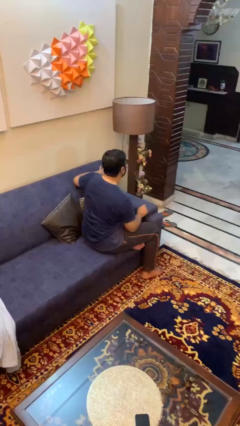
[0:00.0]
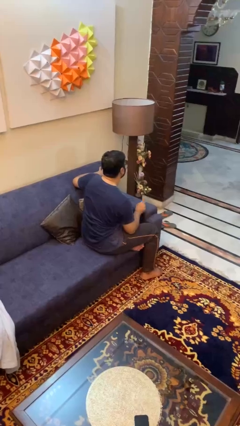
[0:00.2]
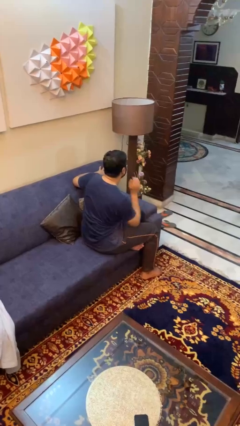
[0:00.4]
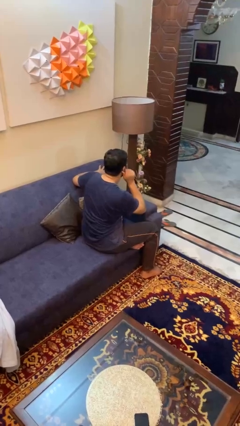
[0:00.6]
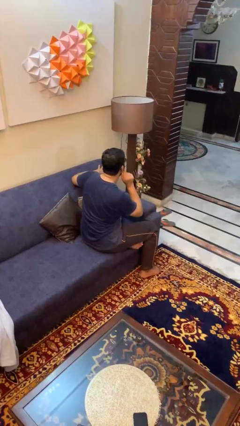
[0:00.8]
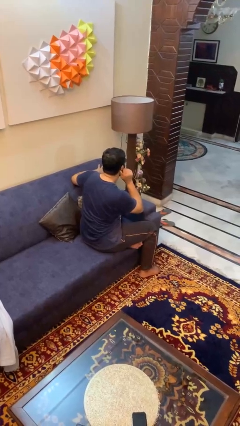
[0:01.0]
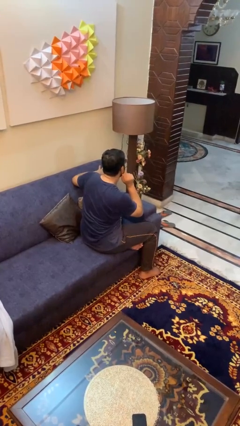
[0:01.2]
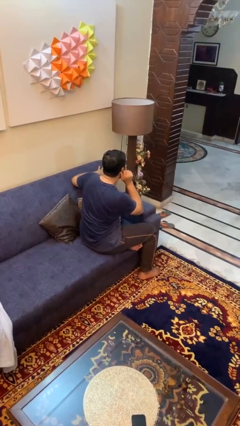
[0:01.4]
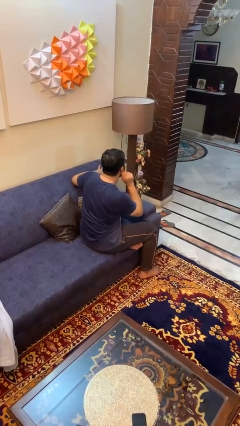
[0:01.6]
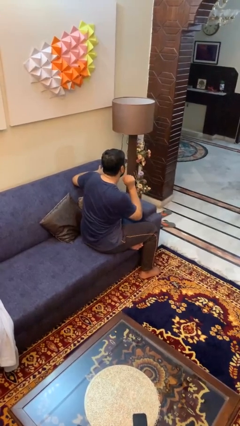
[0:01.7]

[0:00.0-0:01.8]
person touches earlobe

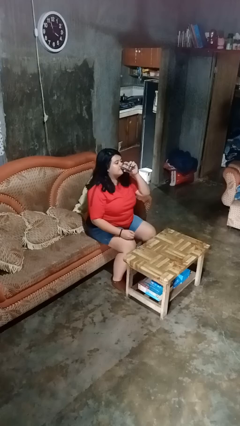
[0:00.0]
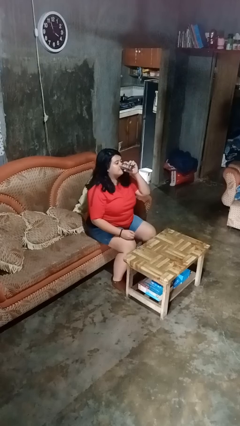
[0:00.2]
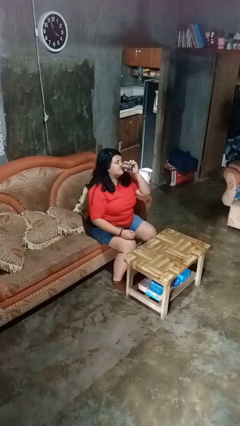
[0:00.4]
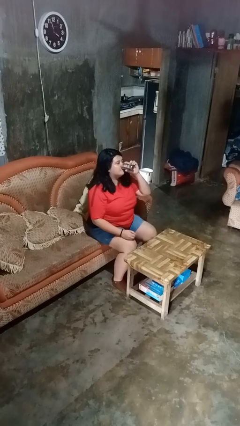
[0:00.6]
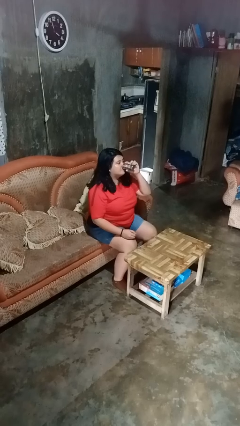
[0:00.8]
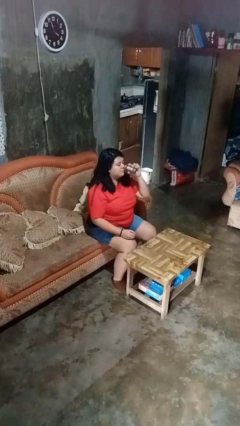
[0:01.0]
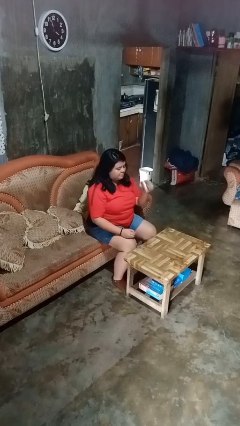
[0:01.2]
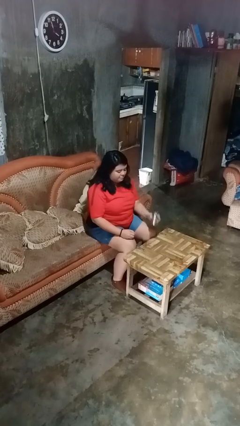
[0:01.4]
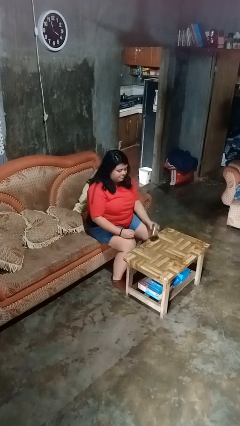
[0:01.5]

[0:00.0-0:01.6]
person drinks from beverage can

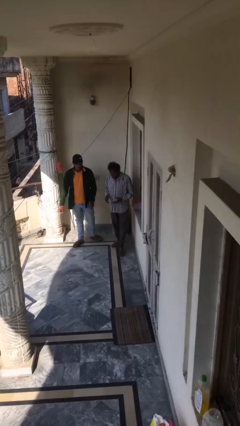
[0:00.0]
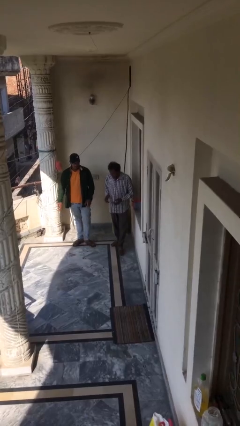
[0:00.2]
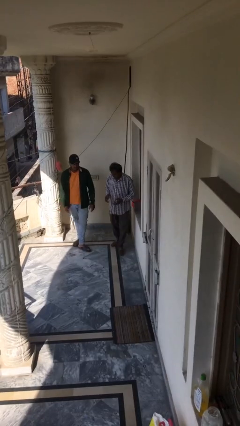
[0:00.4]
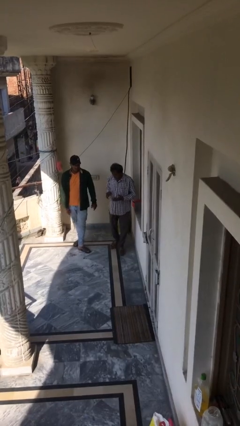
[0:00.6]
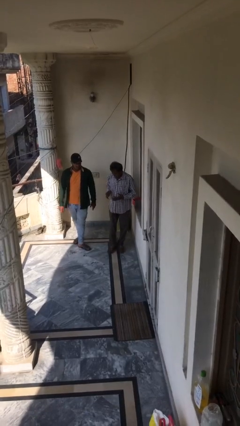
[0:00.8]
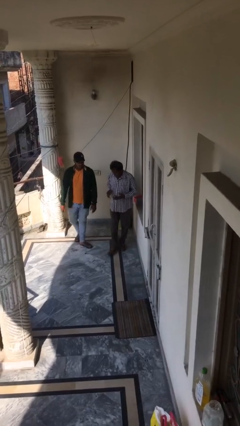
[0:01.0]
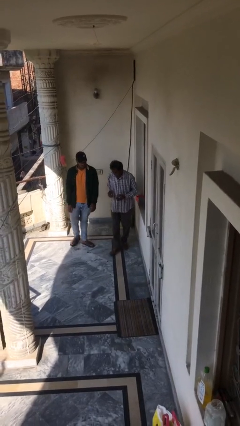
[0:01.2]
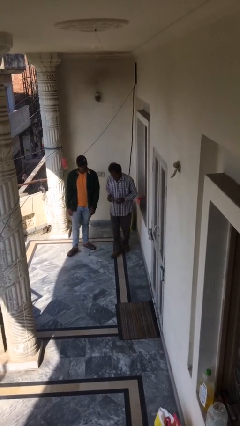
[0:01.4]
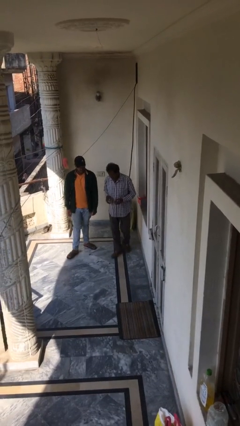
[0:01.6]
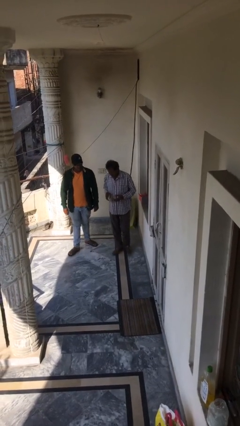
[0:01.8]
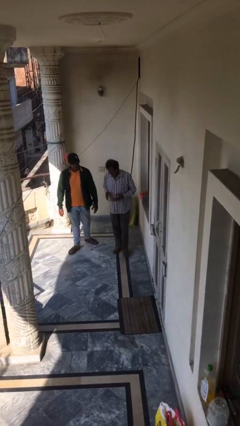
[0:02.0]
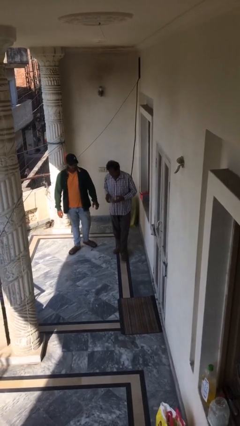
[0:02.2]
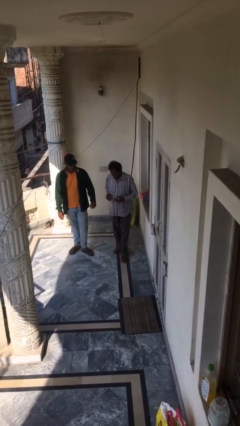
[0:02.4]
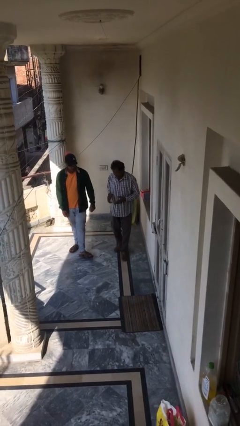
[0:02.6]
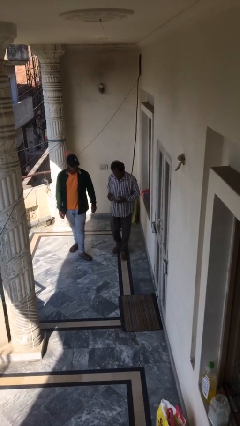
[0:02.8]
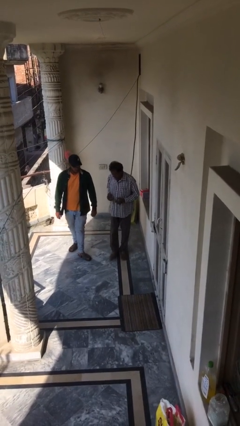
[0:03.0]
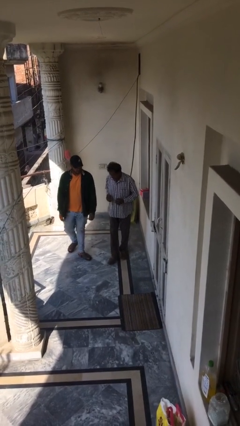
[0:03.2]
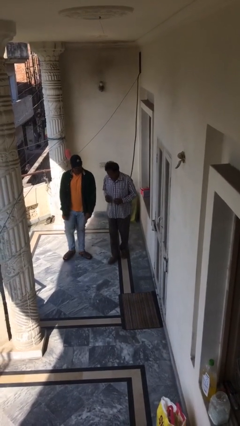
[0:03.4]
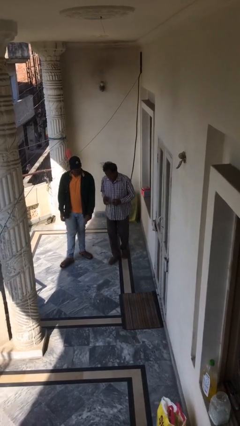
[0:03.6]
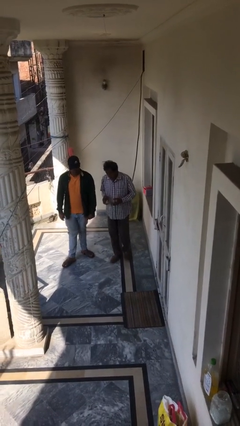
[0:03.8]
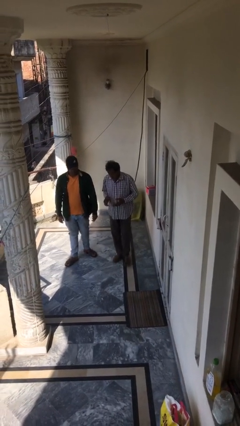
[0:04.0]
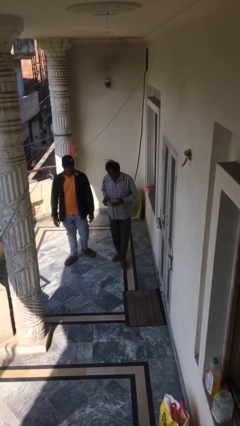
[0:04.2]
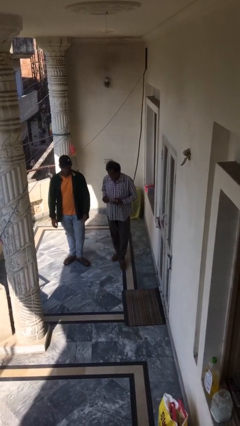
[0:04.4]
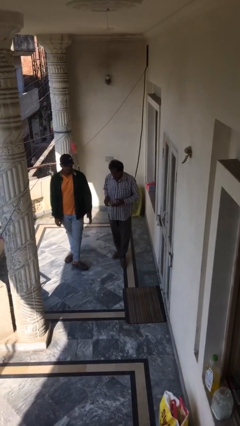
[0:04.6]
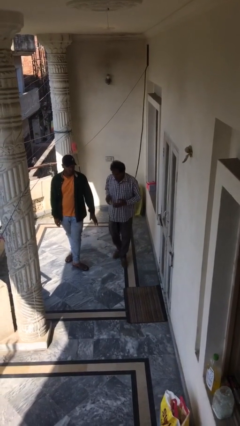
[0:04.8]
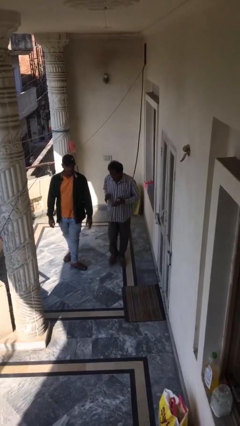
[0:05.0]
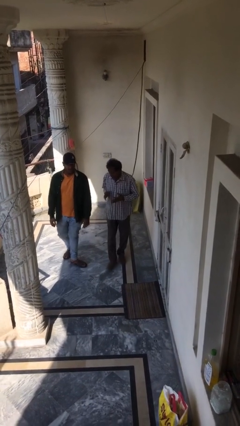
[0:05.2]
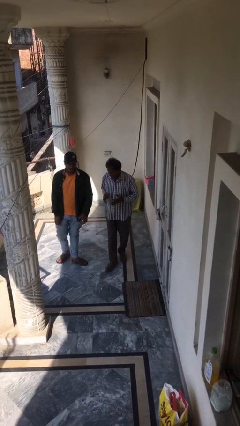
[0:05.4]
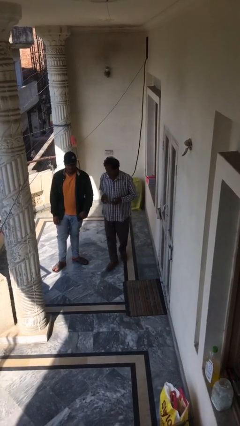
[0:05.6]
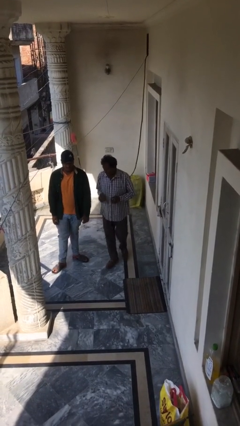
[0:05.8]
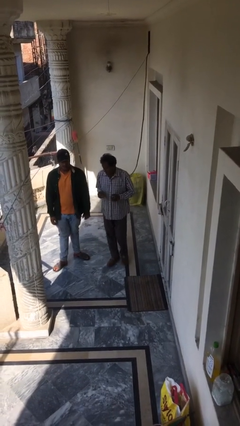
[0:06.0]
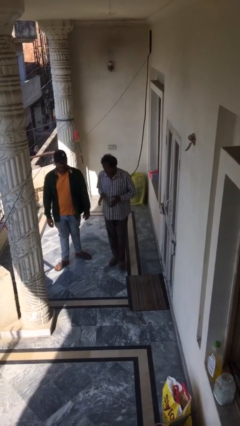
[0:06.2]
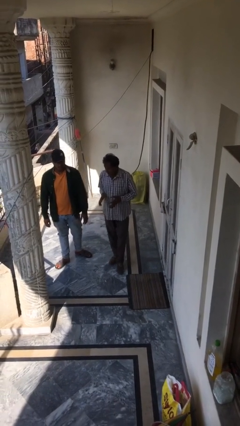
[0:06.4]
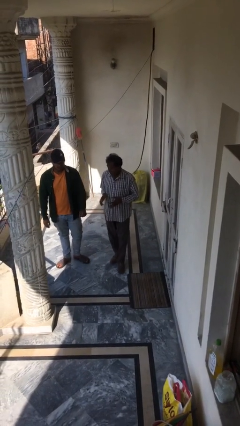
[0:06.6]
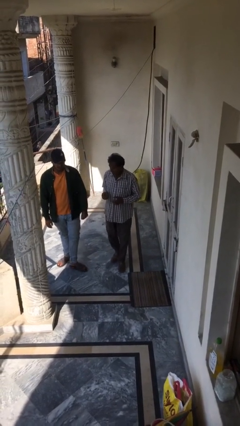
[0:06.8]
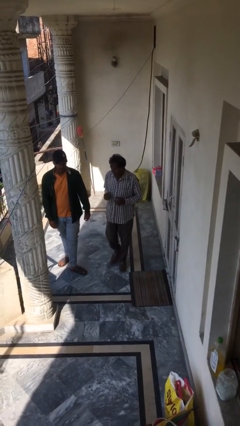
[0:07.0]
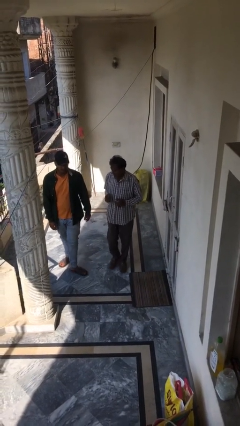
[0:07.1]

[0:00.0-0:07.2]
person talks to person

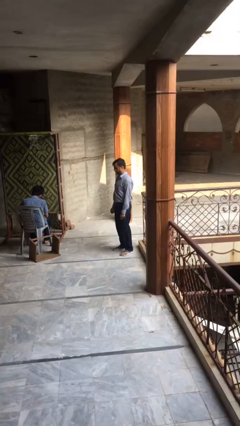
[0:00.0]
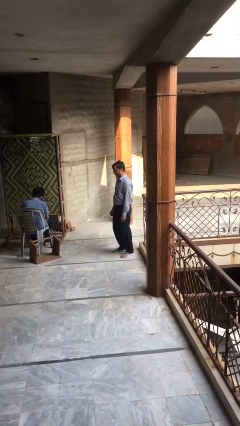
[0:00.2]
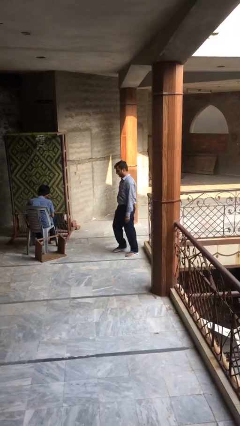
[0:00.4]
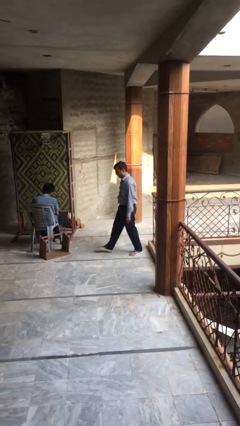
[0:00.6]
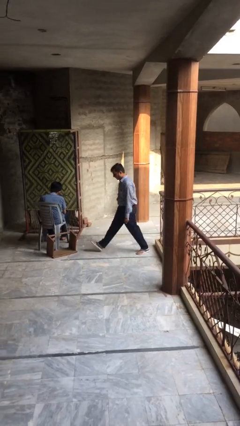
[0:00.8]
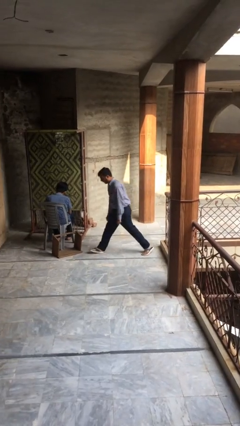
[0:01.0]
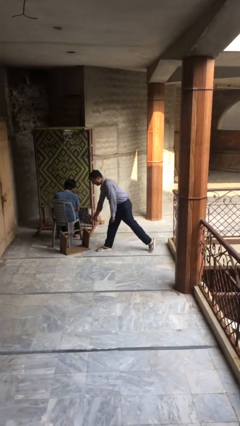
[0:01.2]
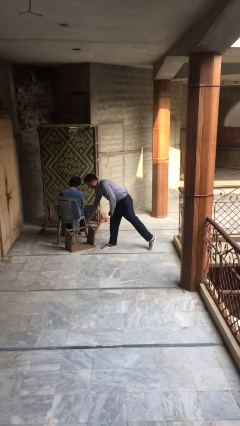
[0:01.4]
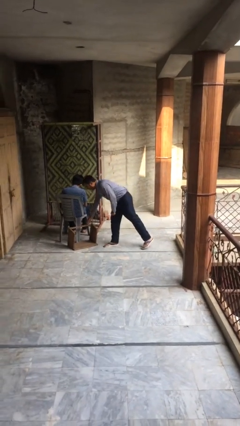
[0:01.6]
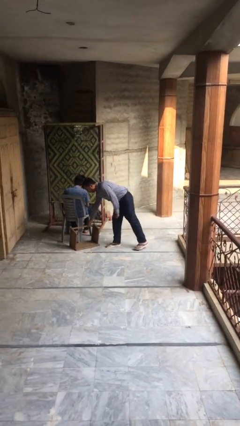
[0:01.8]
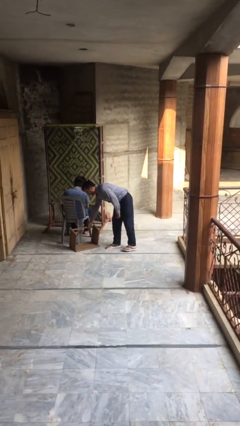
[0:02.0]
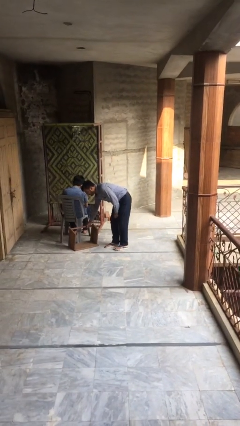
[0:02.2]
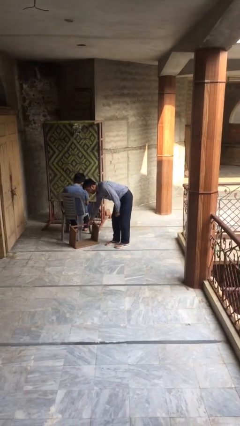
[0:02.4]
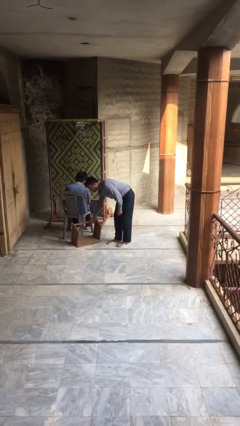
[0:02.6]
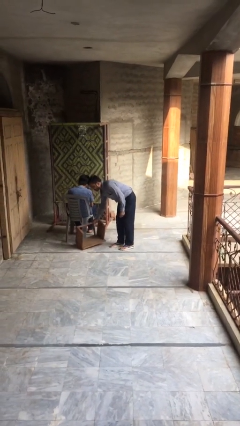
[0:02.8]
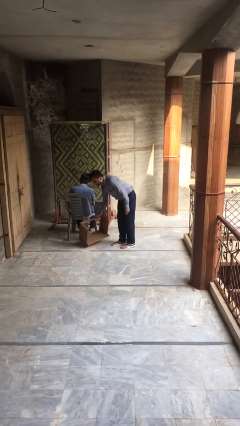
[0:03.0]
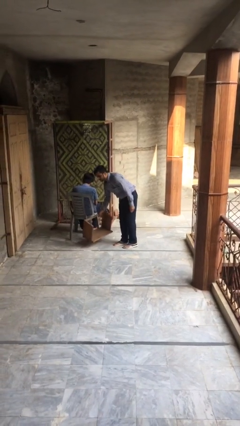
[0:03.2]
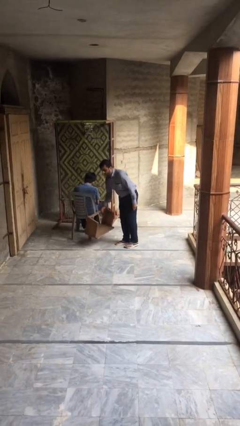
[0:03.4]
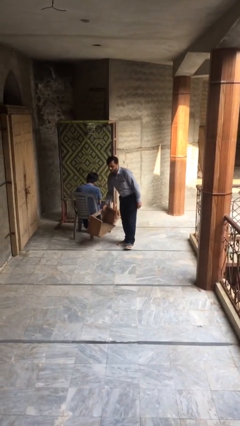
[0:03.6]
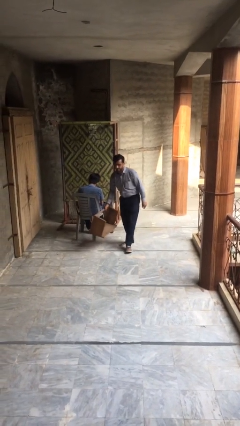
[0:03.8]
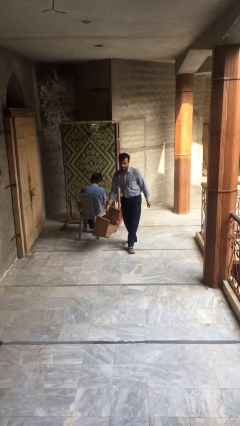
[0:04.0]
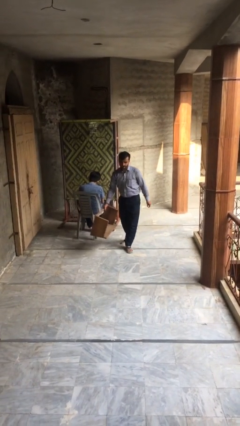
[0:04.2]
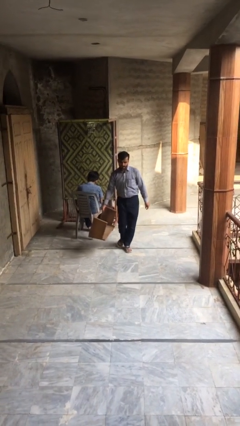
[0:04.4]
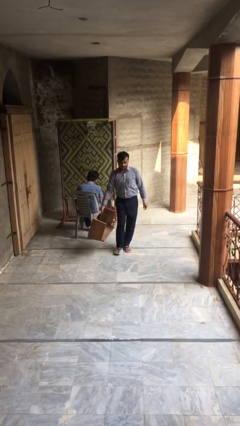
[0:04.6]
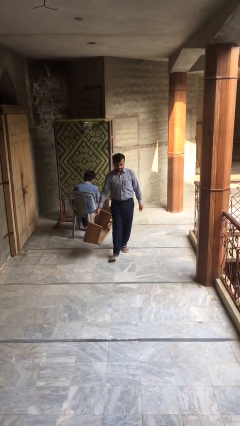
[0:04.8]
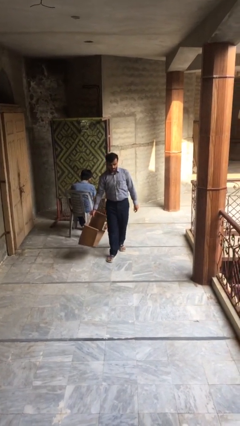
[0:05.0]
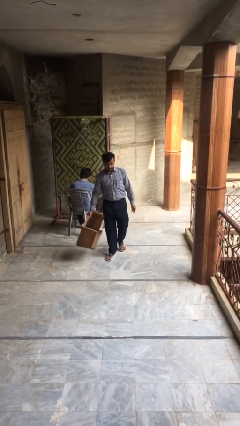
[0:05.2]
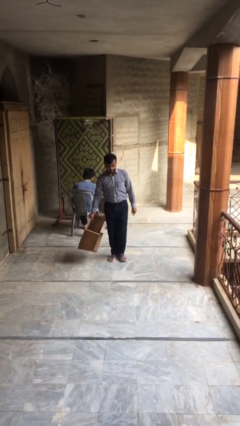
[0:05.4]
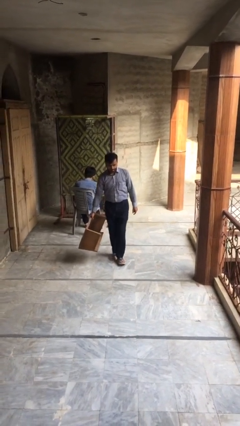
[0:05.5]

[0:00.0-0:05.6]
person steals object from person

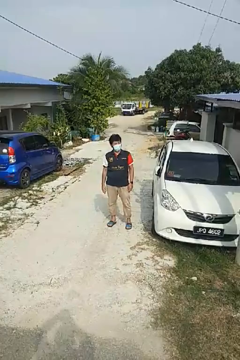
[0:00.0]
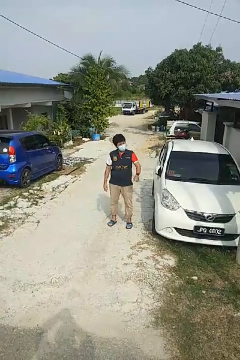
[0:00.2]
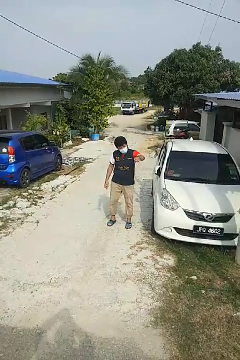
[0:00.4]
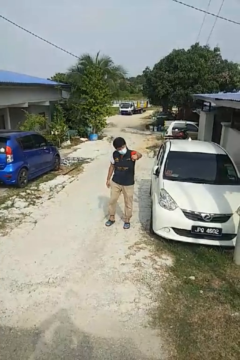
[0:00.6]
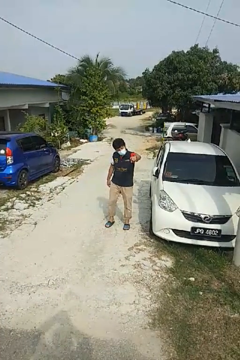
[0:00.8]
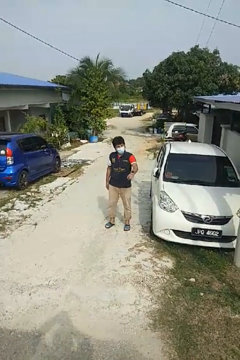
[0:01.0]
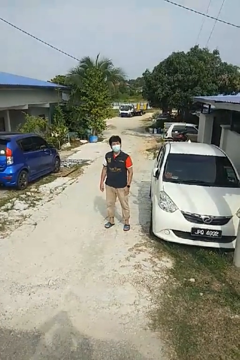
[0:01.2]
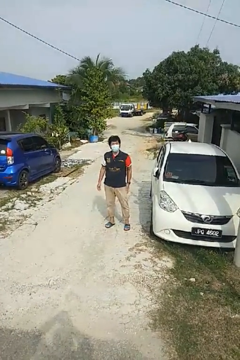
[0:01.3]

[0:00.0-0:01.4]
person points at person
